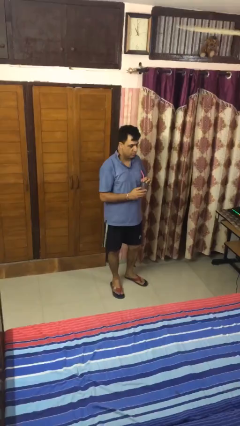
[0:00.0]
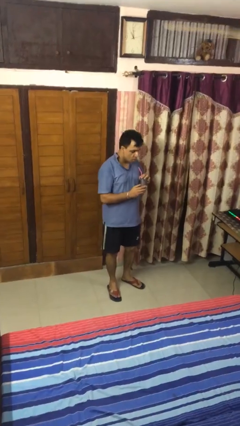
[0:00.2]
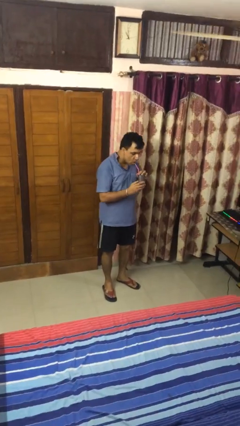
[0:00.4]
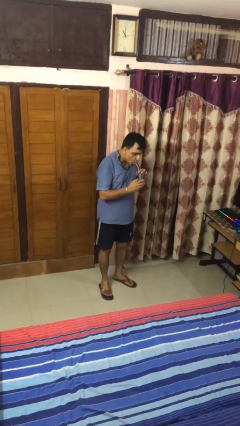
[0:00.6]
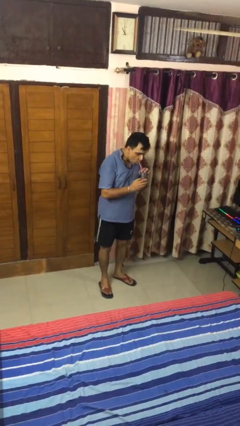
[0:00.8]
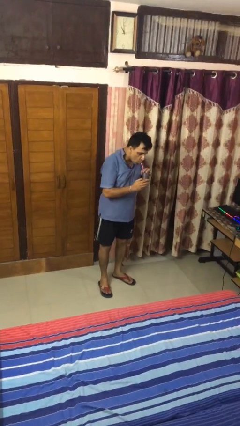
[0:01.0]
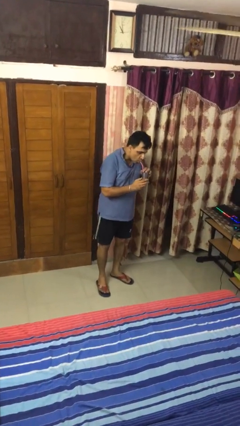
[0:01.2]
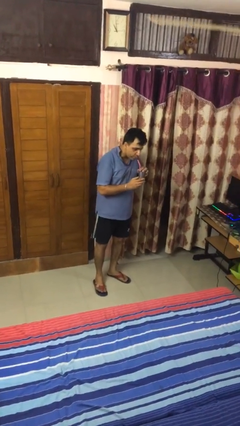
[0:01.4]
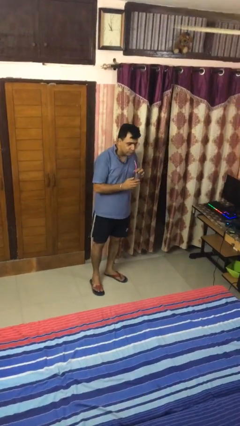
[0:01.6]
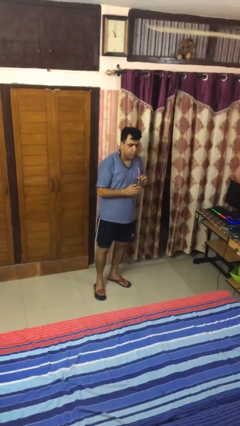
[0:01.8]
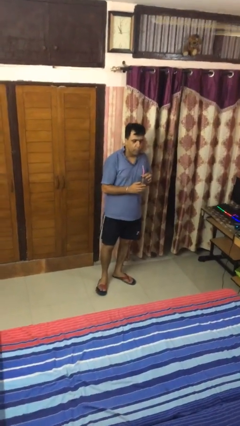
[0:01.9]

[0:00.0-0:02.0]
person drinks from straw

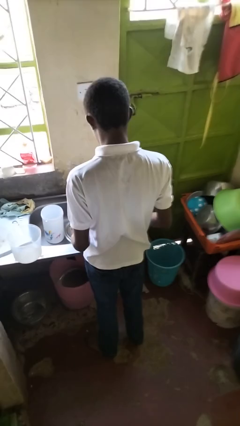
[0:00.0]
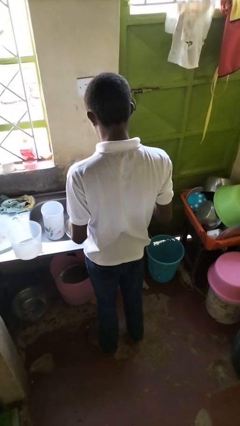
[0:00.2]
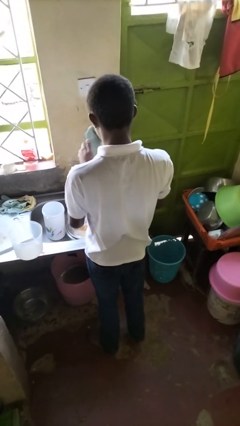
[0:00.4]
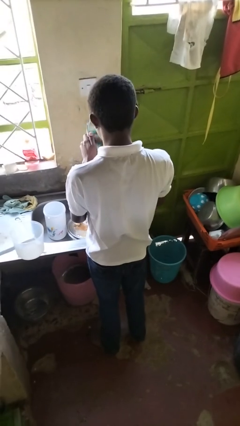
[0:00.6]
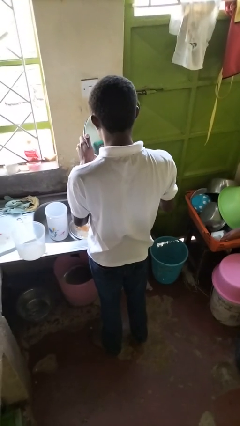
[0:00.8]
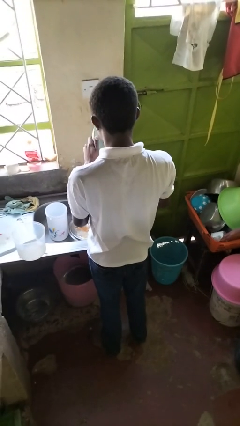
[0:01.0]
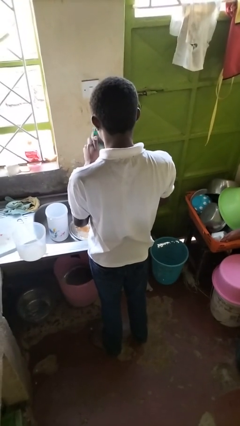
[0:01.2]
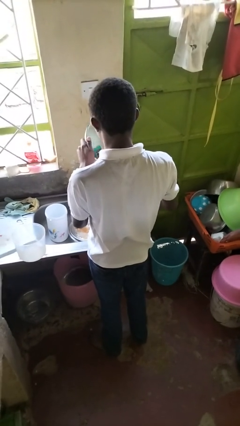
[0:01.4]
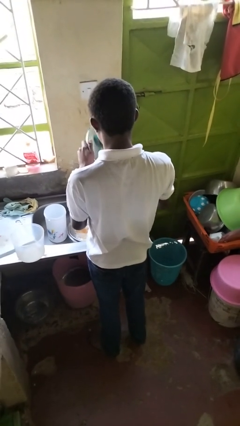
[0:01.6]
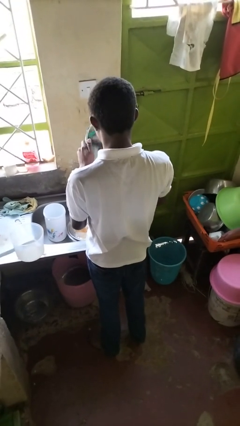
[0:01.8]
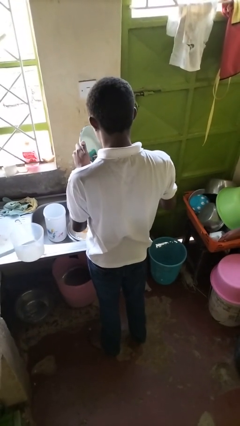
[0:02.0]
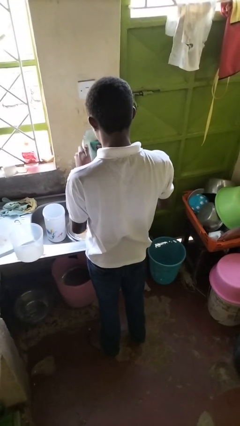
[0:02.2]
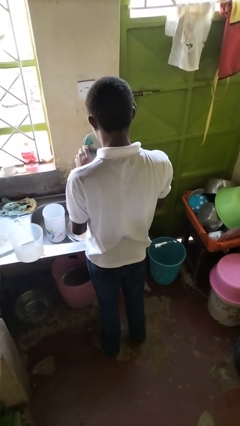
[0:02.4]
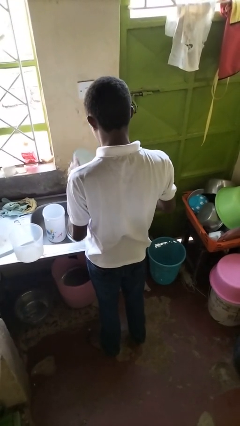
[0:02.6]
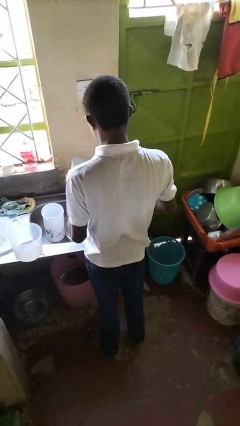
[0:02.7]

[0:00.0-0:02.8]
person washes dish

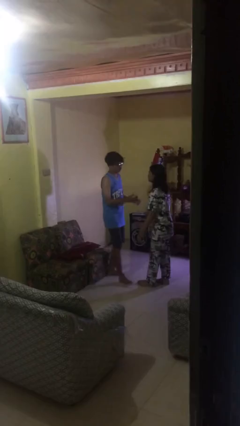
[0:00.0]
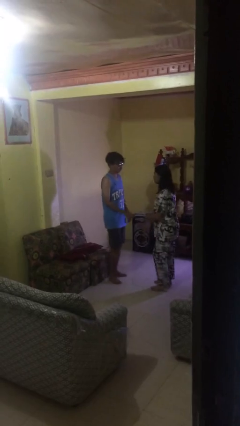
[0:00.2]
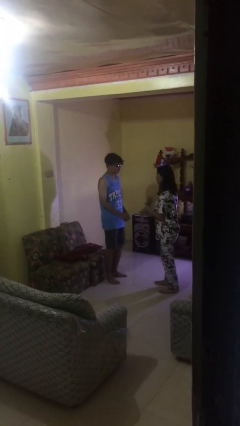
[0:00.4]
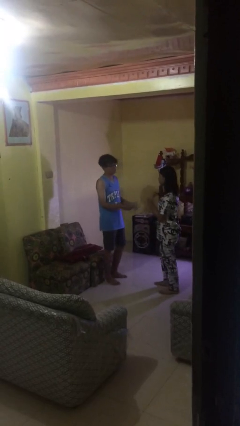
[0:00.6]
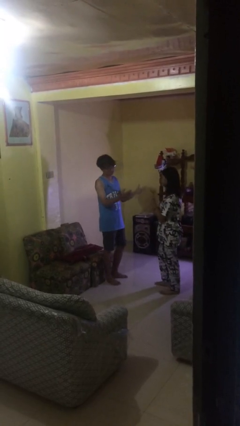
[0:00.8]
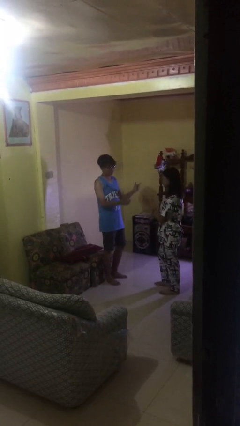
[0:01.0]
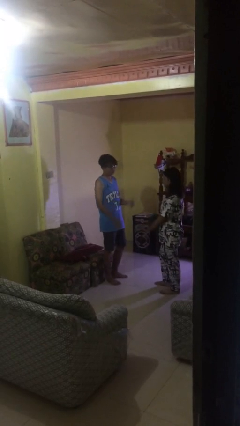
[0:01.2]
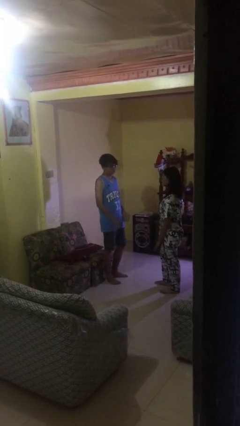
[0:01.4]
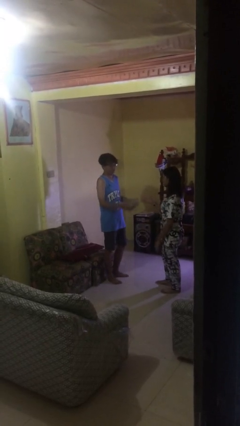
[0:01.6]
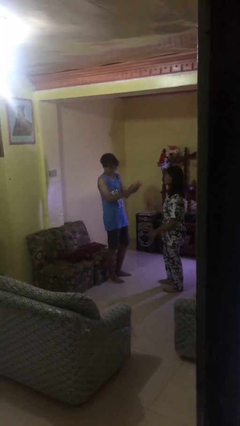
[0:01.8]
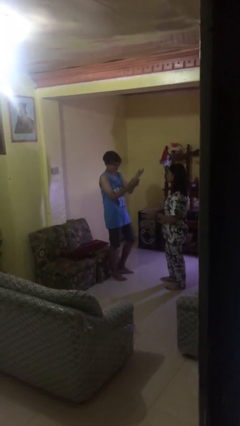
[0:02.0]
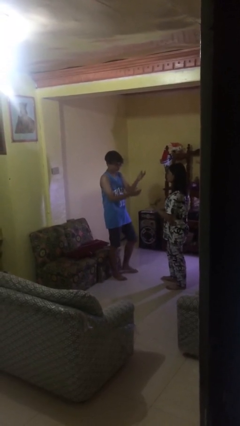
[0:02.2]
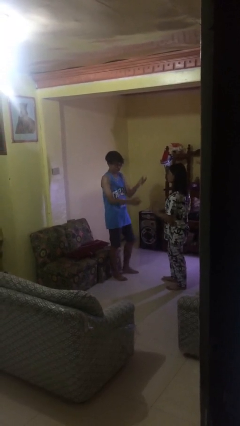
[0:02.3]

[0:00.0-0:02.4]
person talks to person

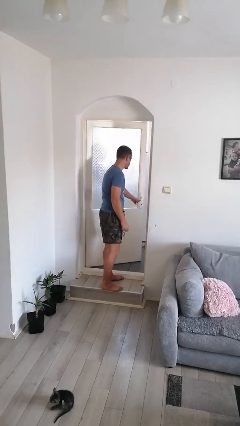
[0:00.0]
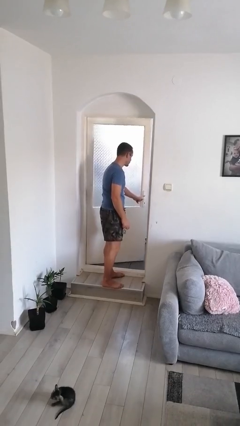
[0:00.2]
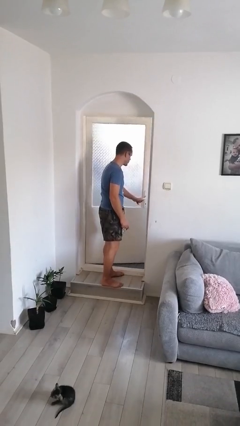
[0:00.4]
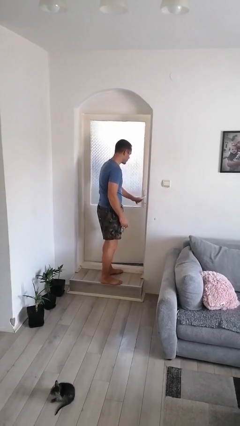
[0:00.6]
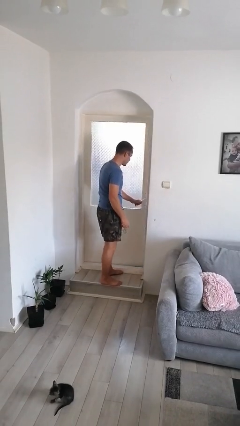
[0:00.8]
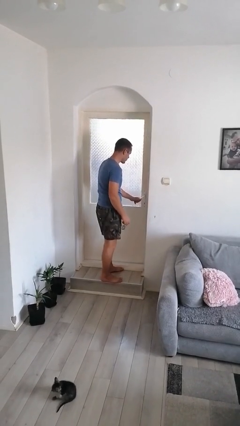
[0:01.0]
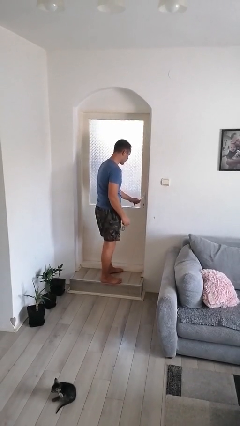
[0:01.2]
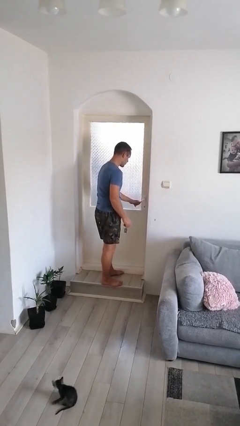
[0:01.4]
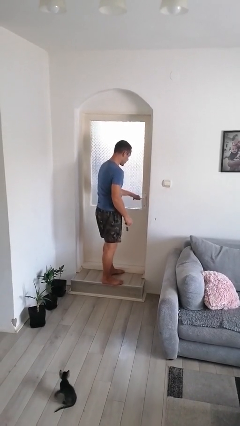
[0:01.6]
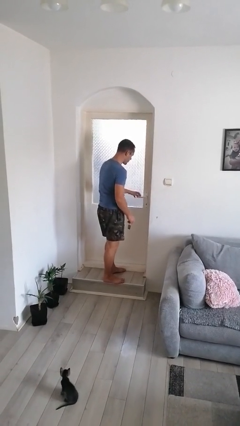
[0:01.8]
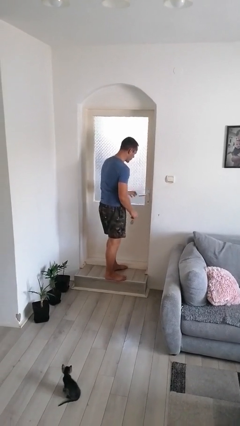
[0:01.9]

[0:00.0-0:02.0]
person closes facility door

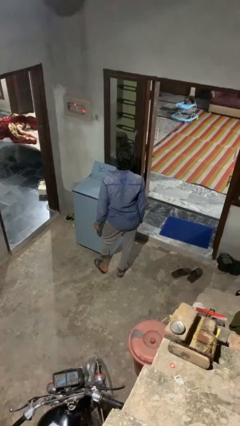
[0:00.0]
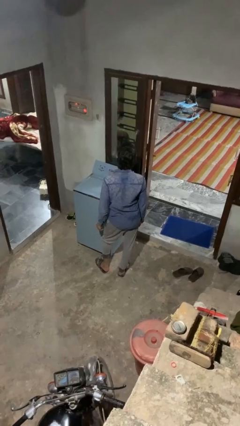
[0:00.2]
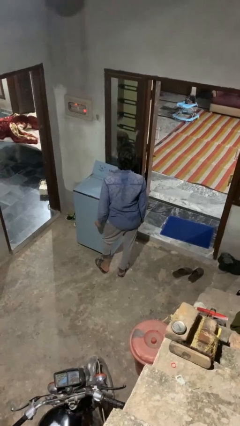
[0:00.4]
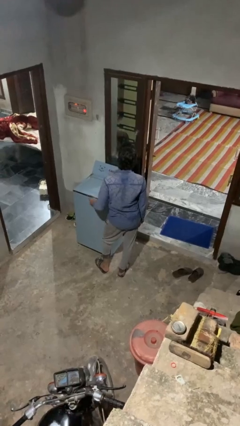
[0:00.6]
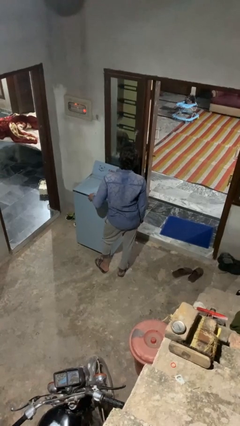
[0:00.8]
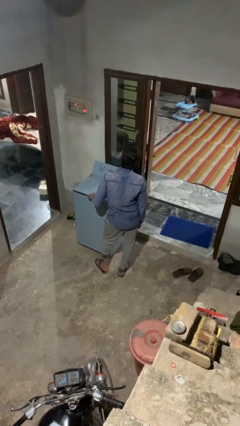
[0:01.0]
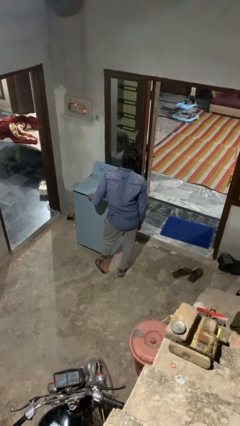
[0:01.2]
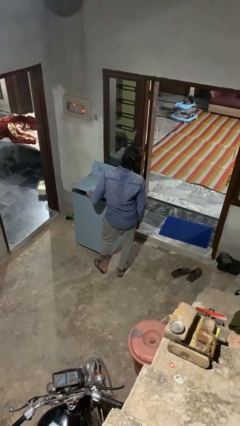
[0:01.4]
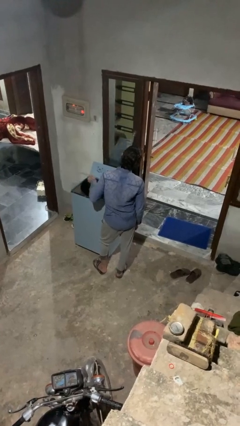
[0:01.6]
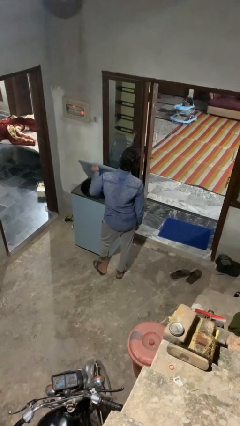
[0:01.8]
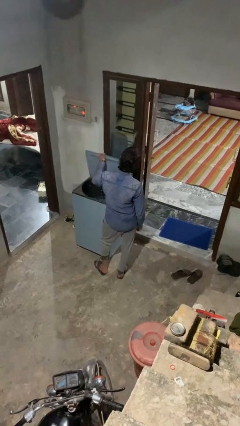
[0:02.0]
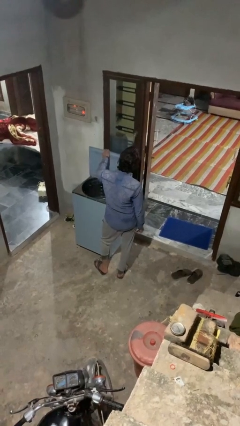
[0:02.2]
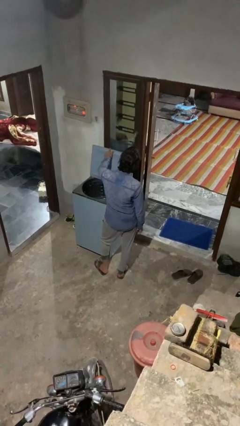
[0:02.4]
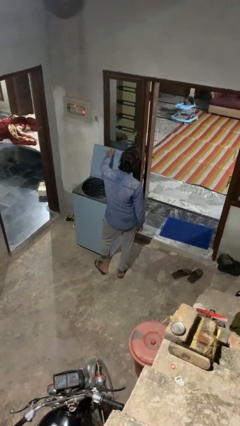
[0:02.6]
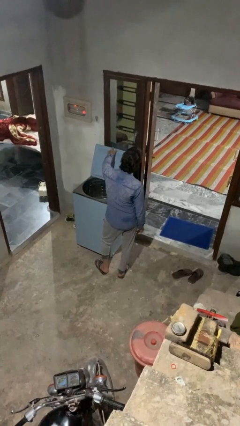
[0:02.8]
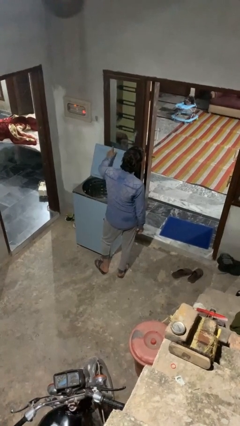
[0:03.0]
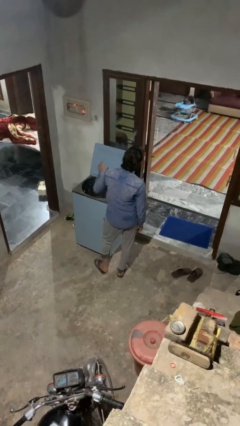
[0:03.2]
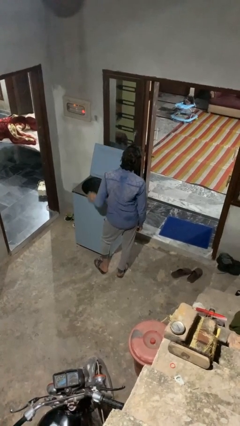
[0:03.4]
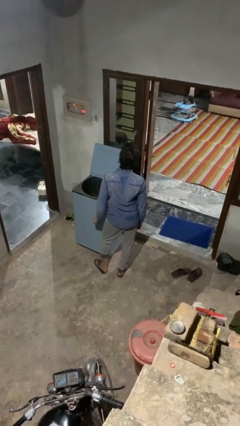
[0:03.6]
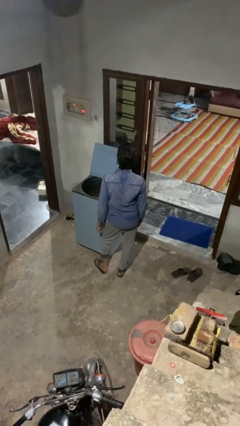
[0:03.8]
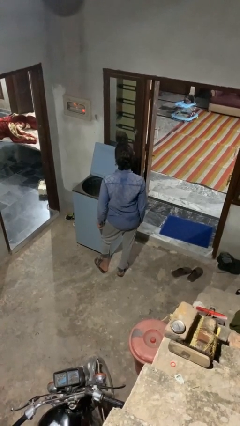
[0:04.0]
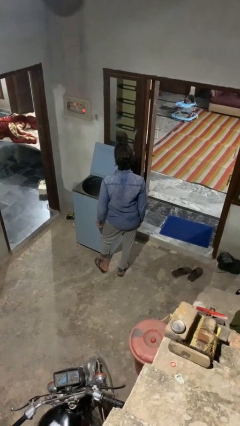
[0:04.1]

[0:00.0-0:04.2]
person opens clothes washer

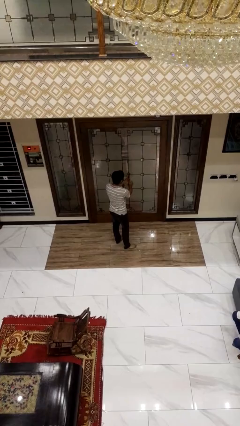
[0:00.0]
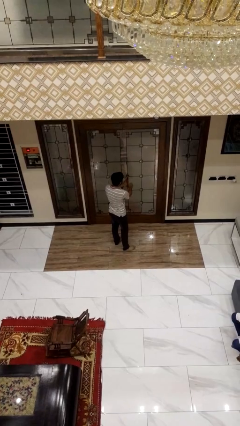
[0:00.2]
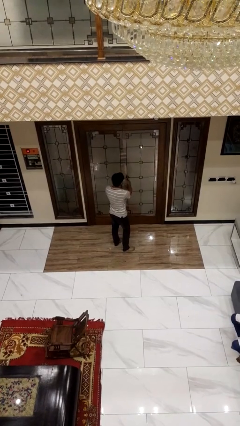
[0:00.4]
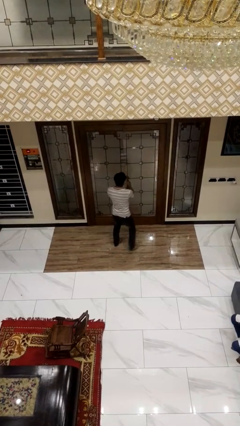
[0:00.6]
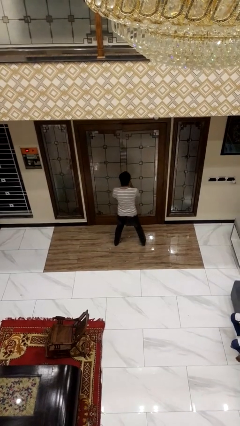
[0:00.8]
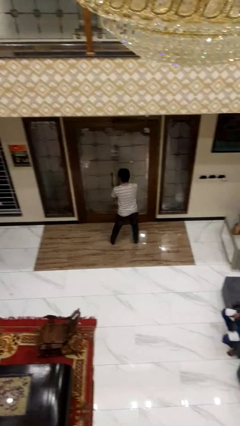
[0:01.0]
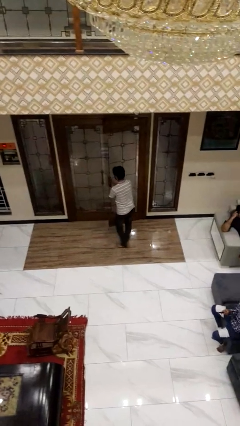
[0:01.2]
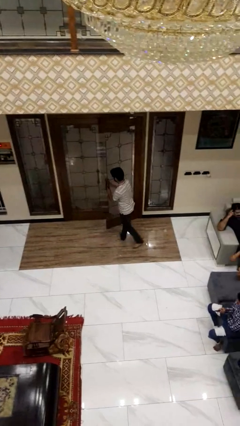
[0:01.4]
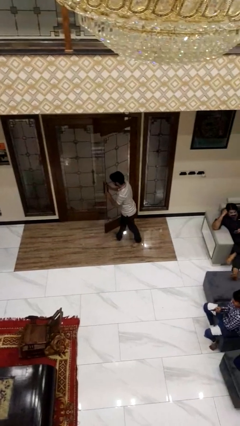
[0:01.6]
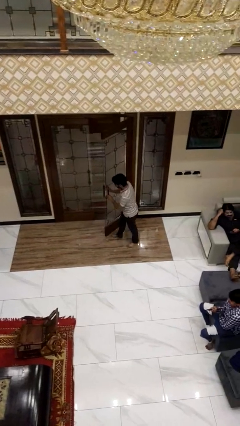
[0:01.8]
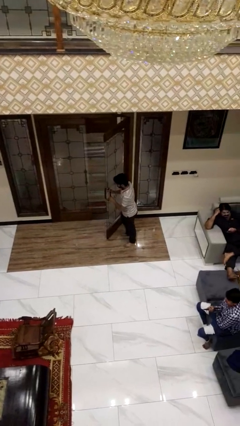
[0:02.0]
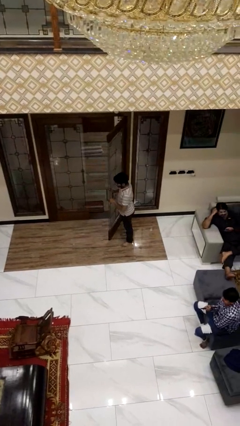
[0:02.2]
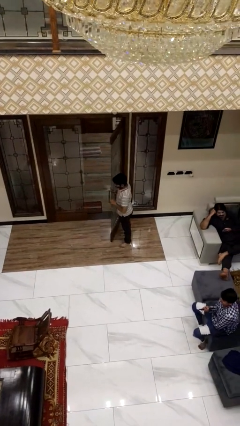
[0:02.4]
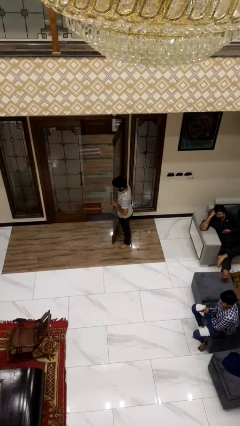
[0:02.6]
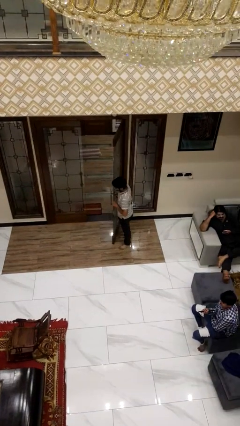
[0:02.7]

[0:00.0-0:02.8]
person opens facility door

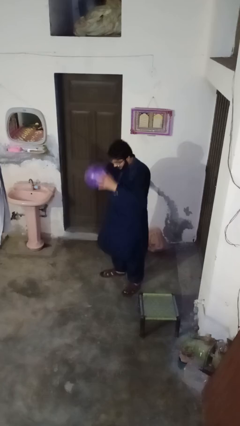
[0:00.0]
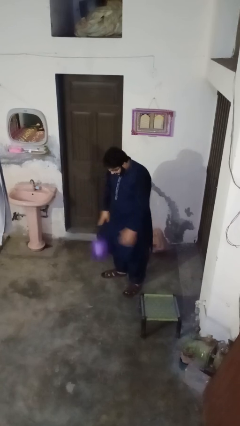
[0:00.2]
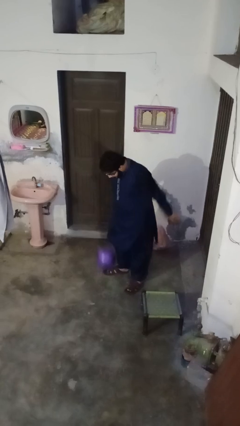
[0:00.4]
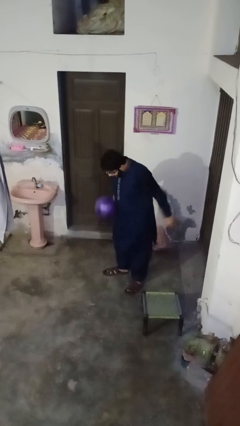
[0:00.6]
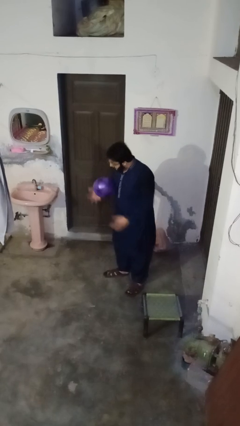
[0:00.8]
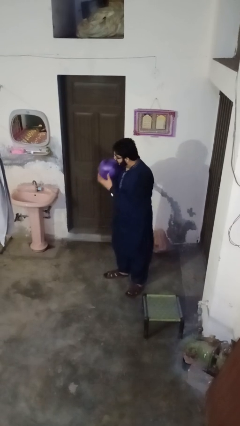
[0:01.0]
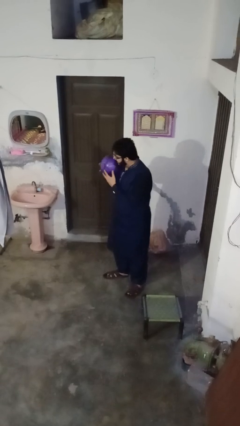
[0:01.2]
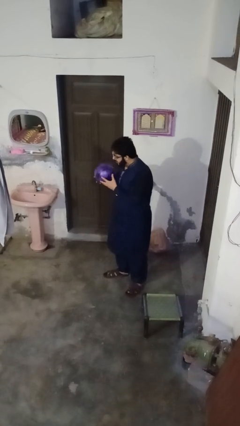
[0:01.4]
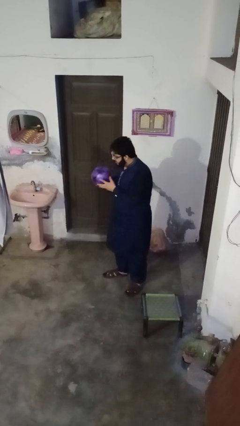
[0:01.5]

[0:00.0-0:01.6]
person bounces ball on floor
